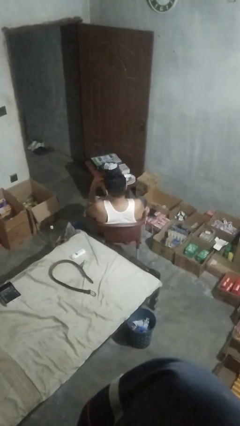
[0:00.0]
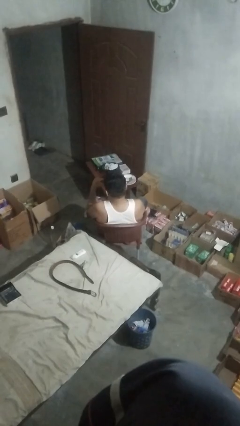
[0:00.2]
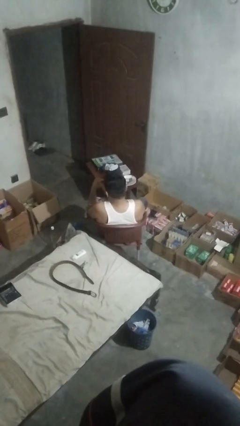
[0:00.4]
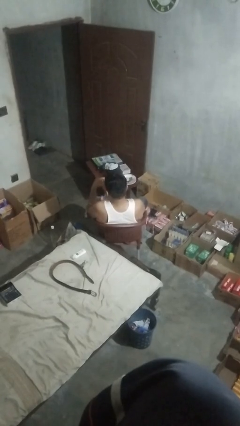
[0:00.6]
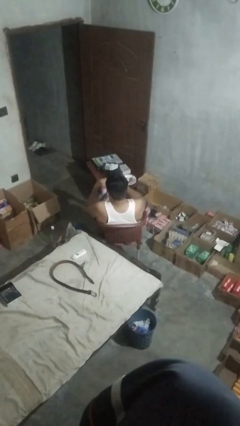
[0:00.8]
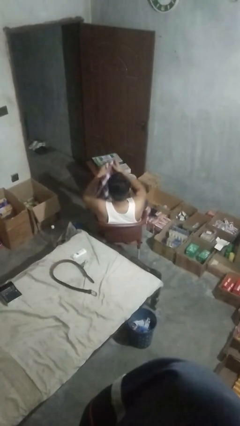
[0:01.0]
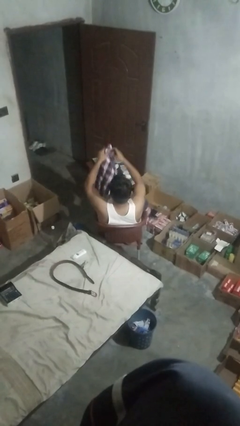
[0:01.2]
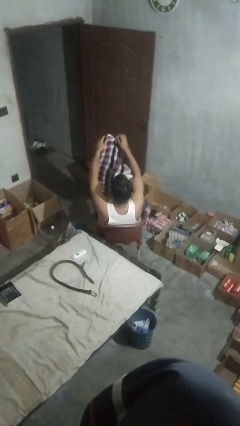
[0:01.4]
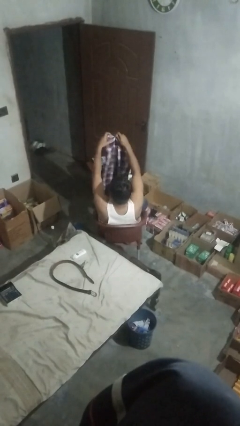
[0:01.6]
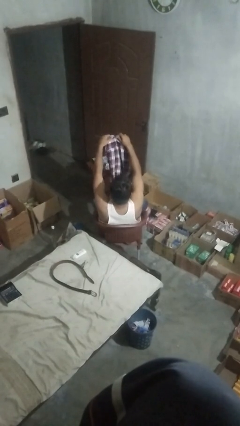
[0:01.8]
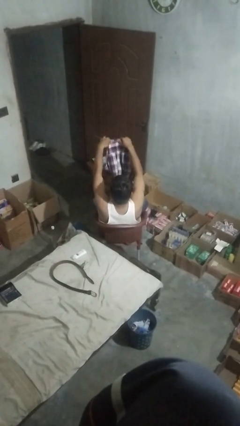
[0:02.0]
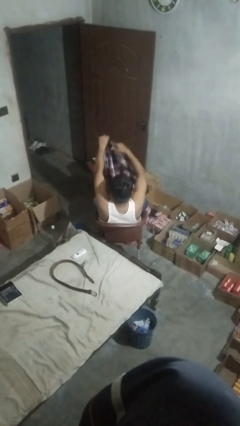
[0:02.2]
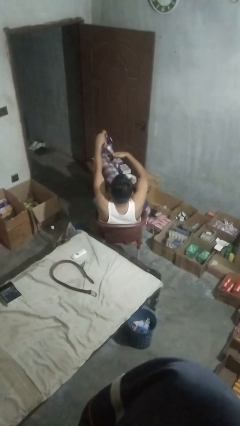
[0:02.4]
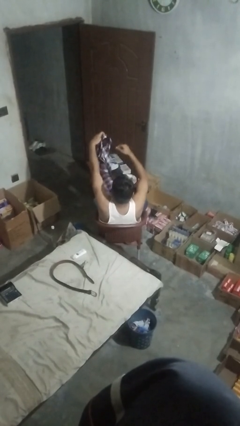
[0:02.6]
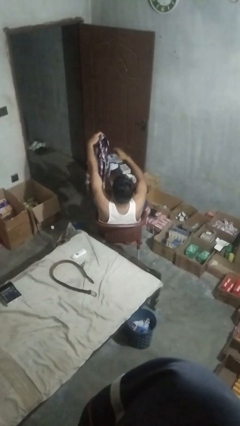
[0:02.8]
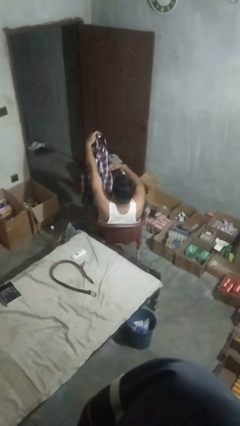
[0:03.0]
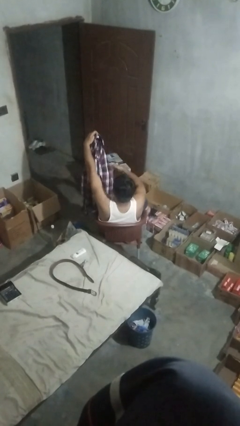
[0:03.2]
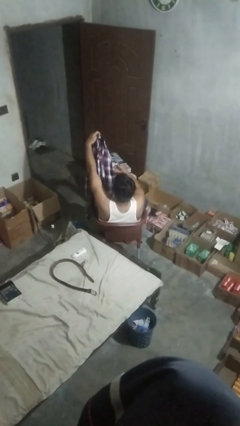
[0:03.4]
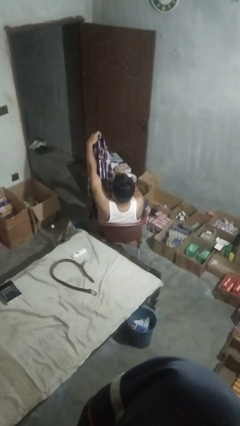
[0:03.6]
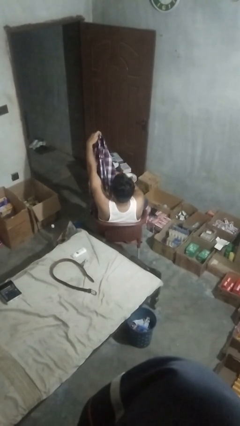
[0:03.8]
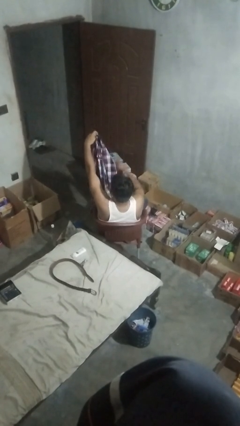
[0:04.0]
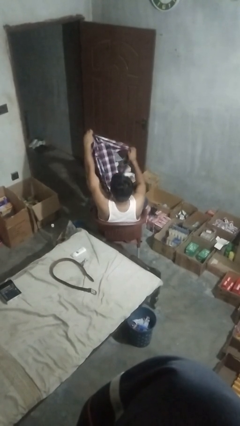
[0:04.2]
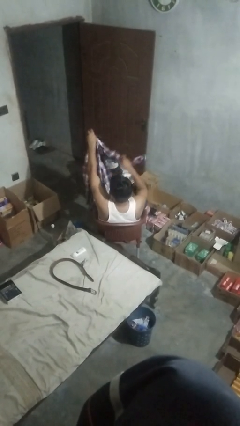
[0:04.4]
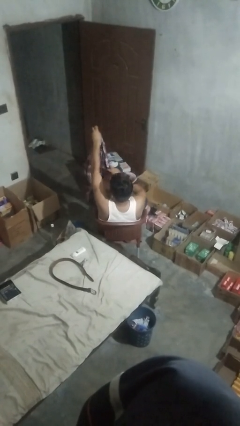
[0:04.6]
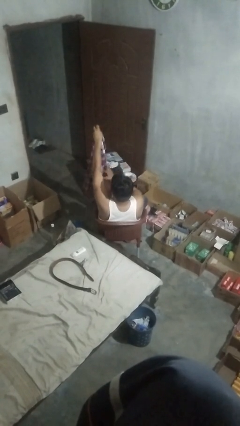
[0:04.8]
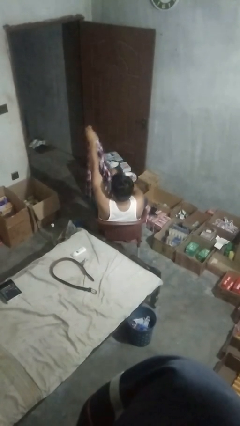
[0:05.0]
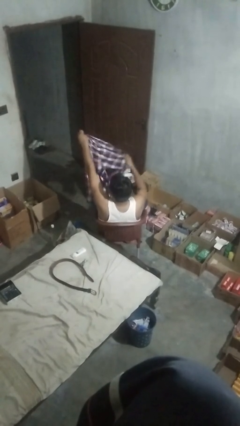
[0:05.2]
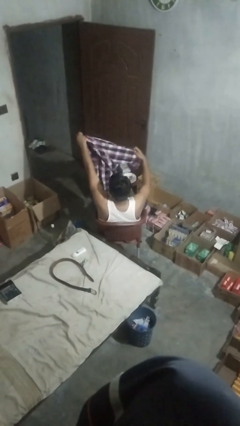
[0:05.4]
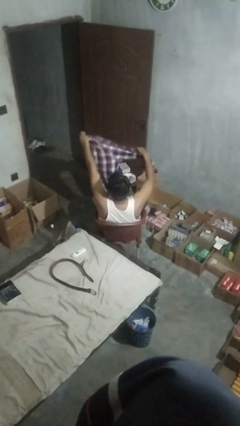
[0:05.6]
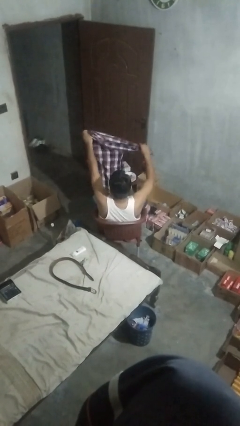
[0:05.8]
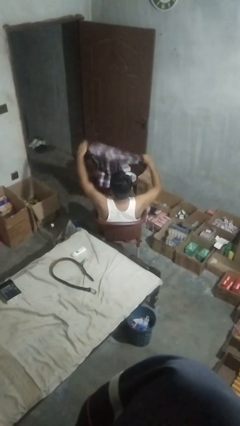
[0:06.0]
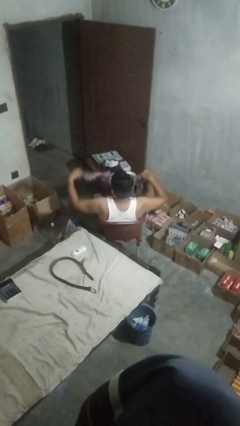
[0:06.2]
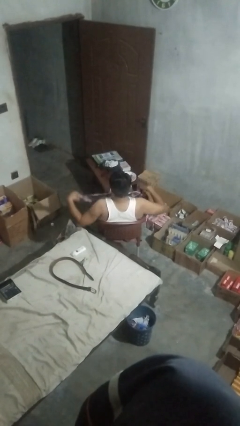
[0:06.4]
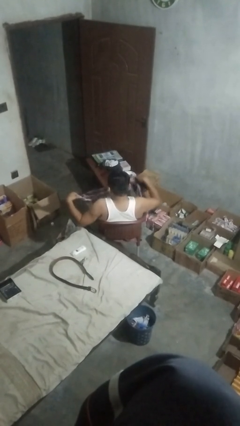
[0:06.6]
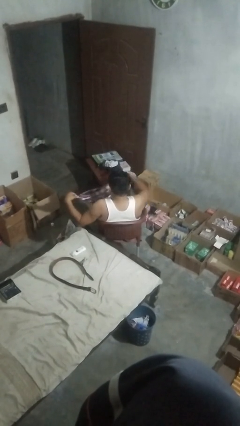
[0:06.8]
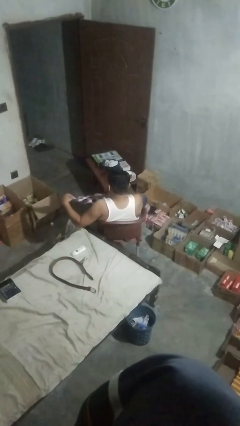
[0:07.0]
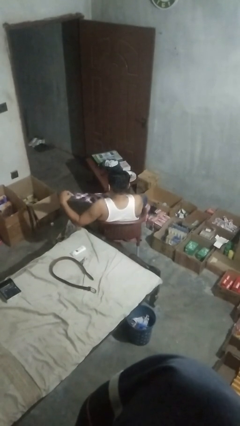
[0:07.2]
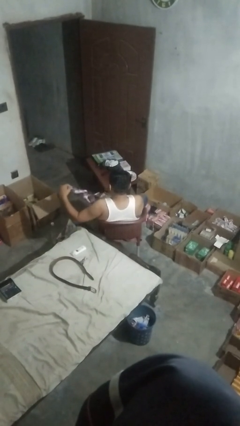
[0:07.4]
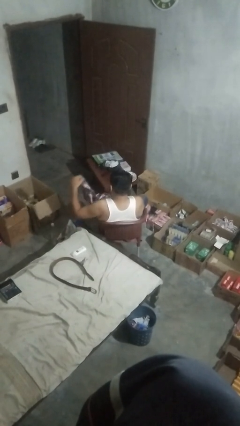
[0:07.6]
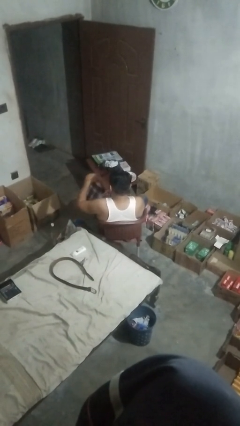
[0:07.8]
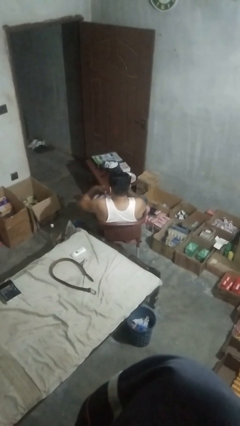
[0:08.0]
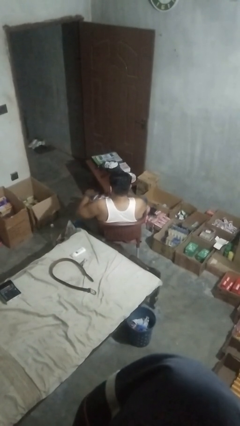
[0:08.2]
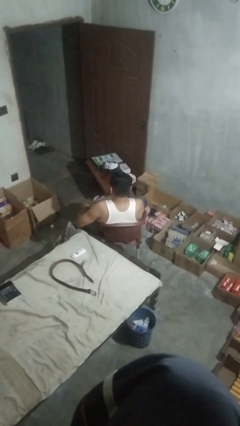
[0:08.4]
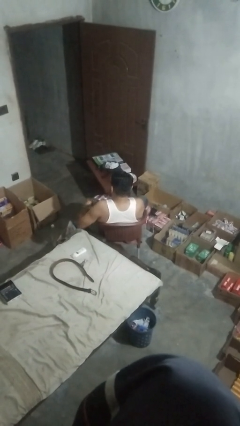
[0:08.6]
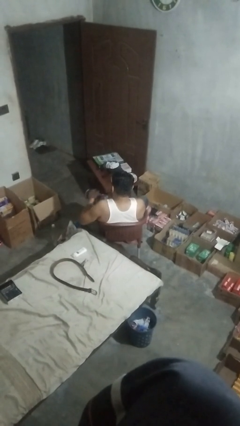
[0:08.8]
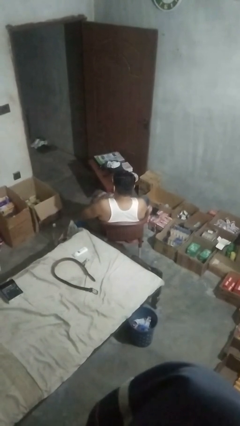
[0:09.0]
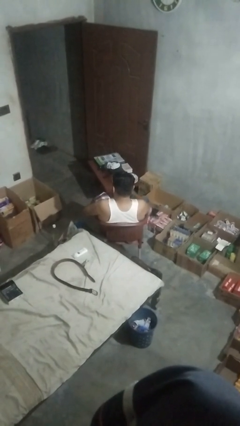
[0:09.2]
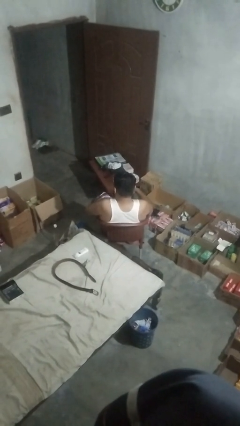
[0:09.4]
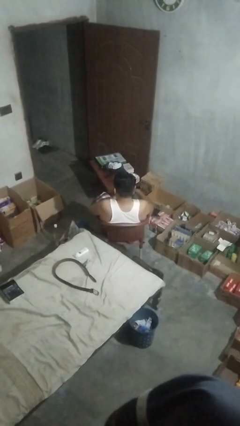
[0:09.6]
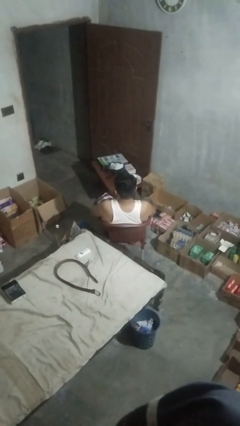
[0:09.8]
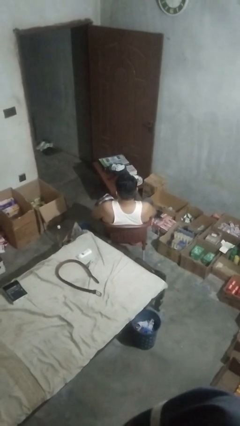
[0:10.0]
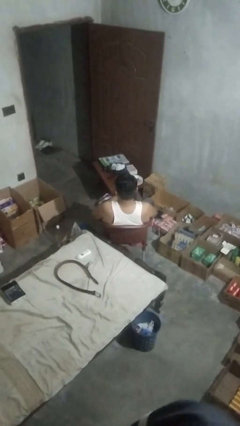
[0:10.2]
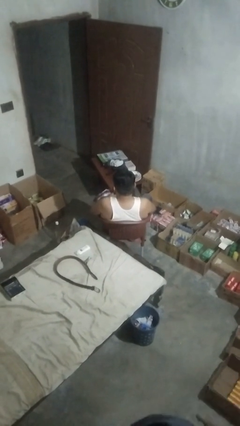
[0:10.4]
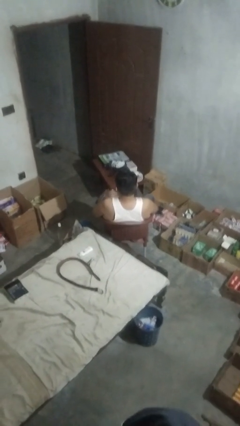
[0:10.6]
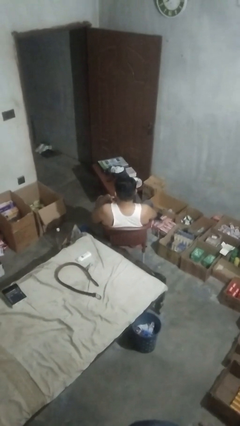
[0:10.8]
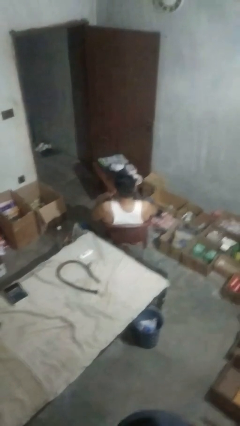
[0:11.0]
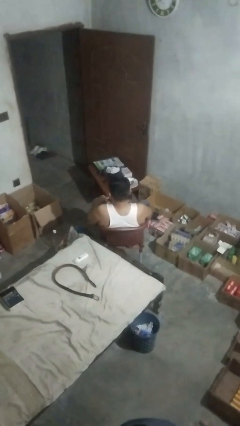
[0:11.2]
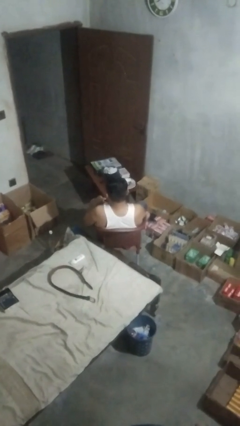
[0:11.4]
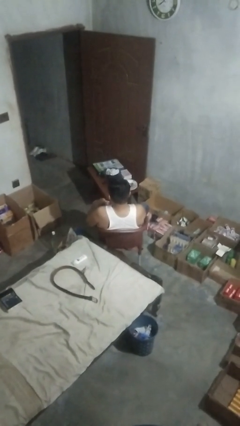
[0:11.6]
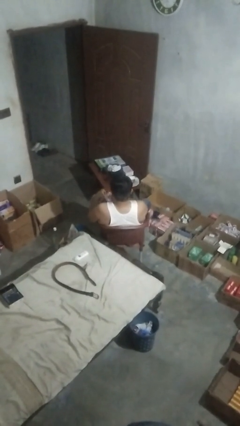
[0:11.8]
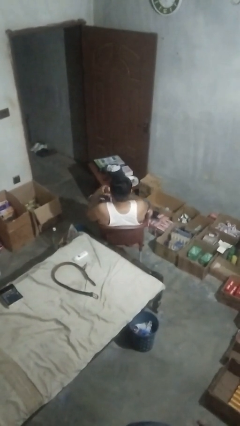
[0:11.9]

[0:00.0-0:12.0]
person folds shirt

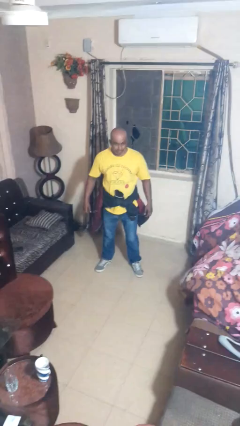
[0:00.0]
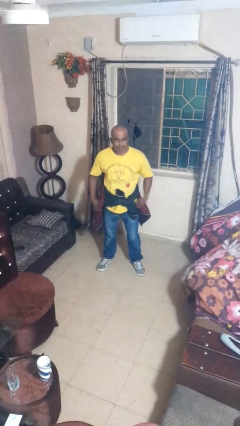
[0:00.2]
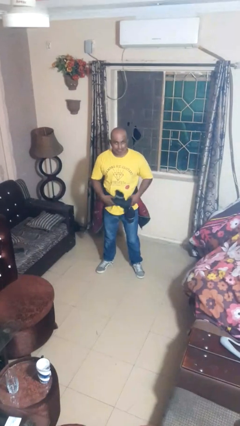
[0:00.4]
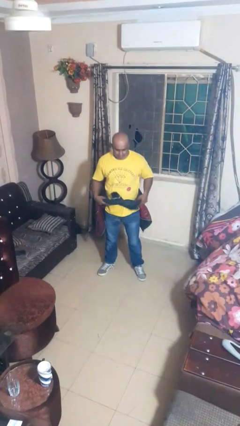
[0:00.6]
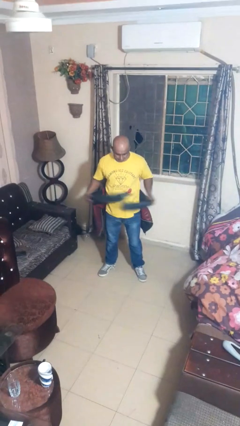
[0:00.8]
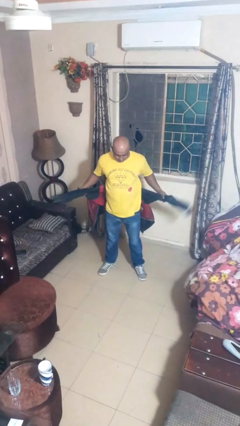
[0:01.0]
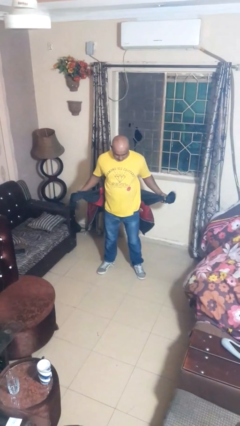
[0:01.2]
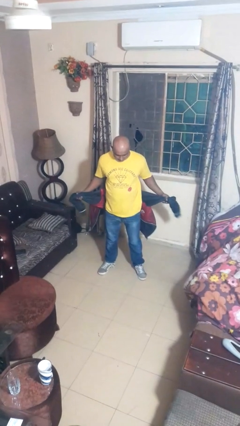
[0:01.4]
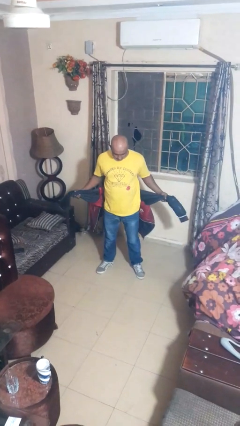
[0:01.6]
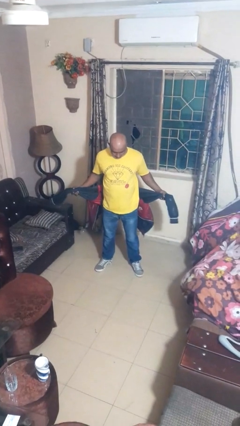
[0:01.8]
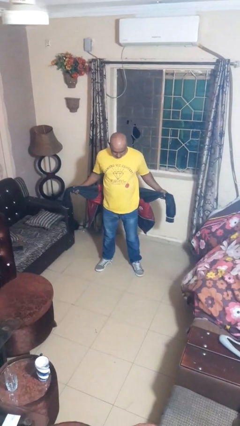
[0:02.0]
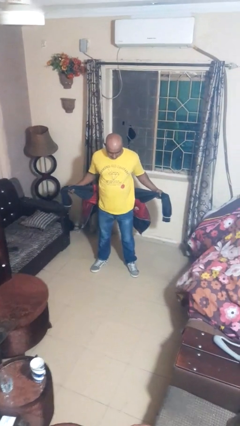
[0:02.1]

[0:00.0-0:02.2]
person unties jacket around waist

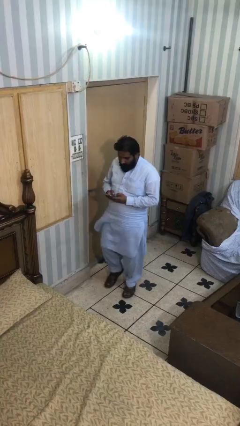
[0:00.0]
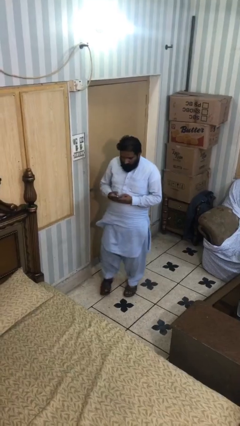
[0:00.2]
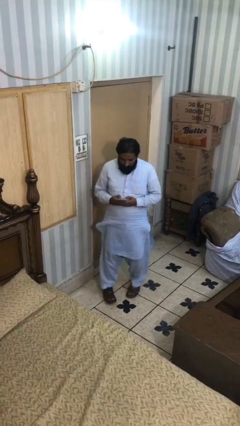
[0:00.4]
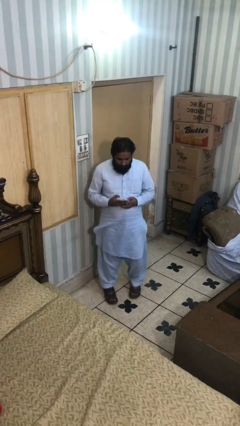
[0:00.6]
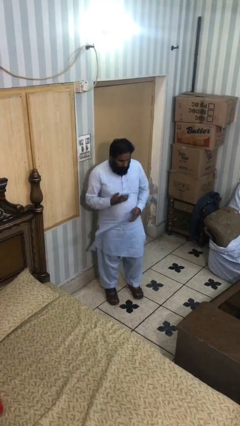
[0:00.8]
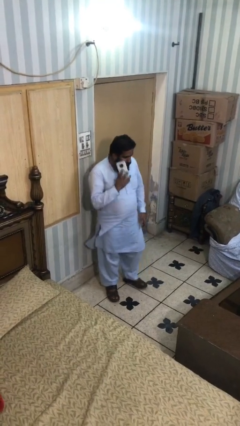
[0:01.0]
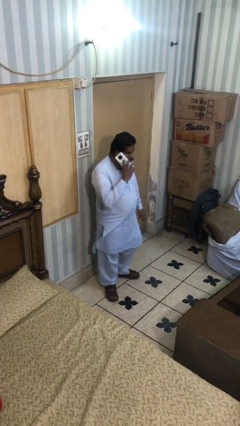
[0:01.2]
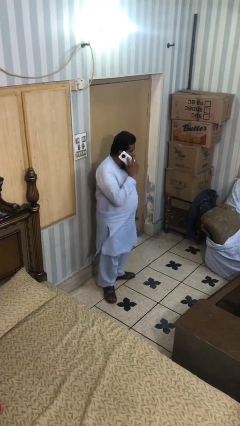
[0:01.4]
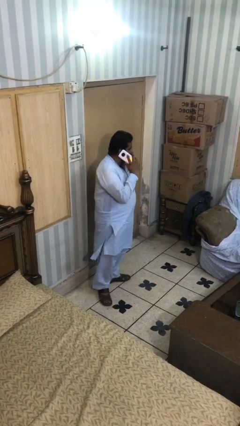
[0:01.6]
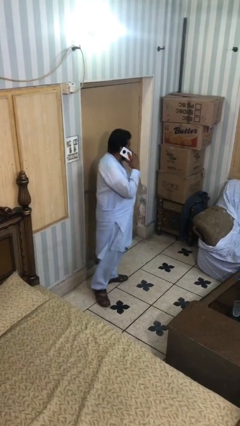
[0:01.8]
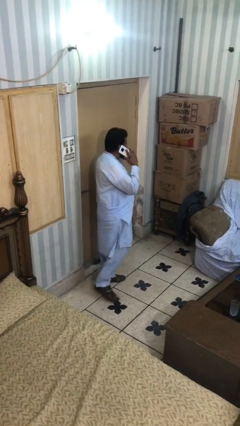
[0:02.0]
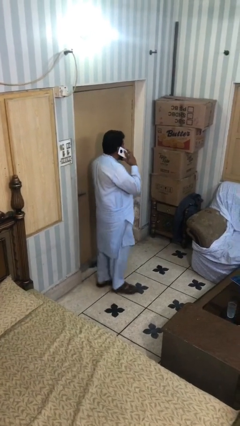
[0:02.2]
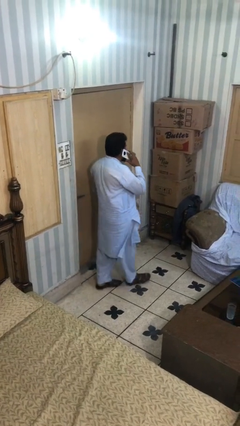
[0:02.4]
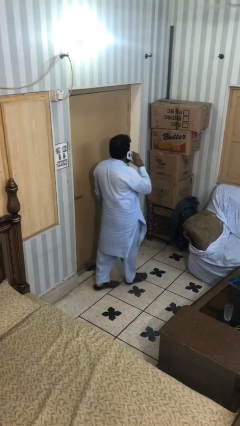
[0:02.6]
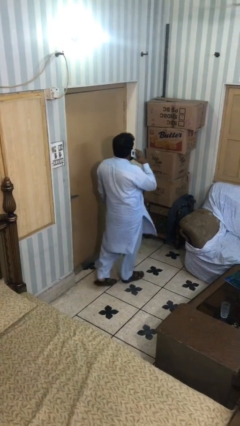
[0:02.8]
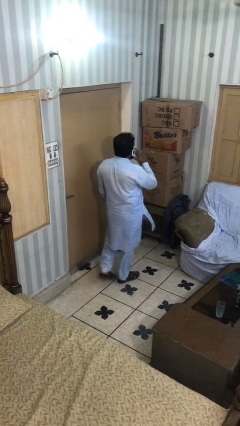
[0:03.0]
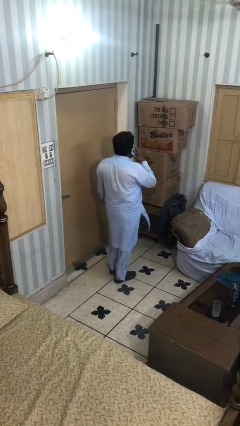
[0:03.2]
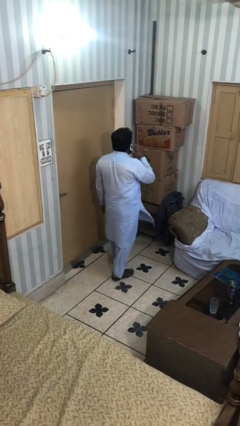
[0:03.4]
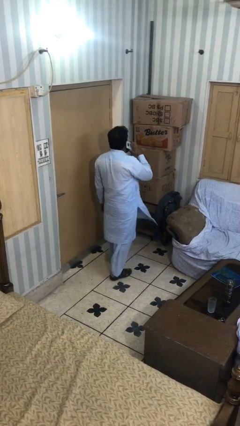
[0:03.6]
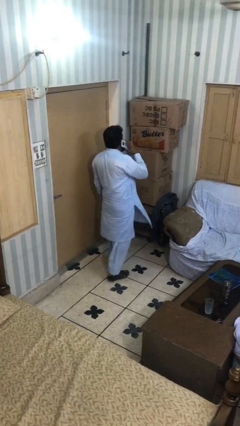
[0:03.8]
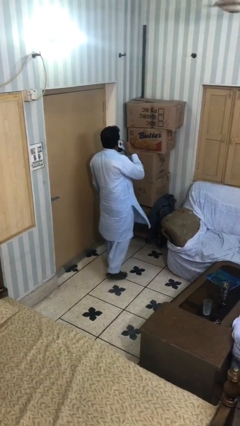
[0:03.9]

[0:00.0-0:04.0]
person talks on phone
